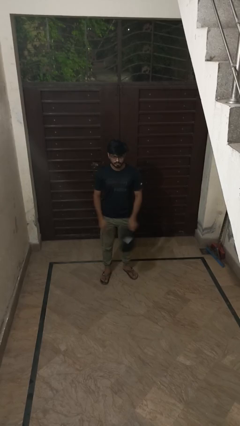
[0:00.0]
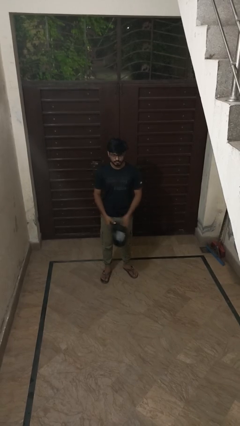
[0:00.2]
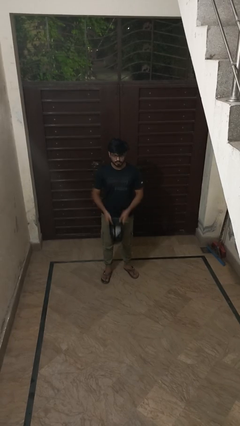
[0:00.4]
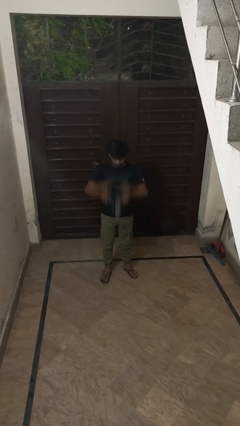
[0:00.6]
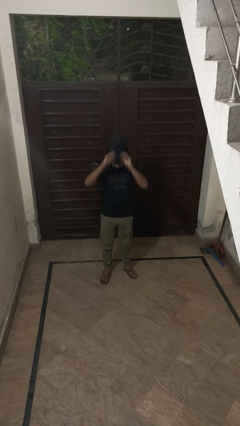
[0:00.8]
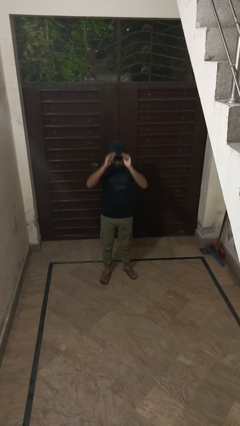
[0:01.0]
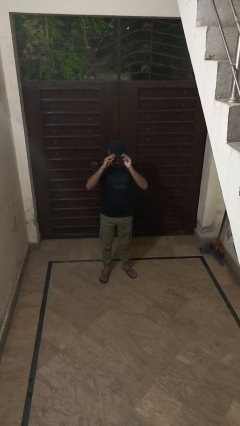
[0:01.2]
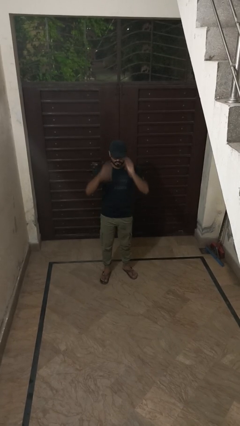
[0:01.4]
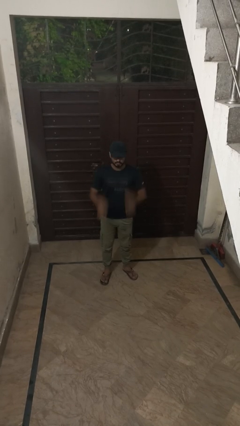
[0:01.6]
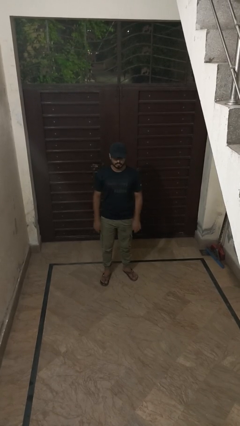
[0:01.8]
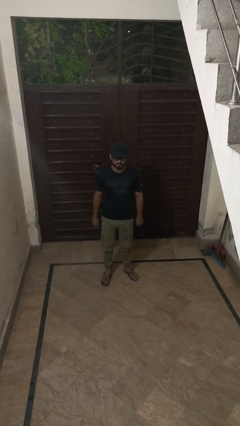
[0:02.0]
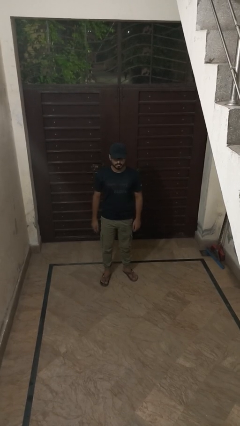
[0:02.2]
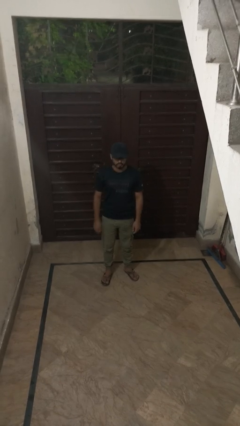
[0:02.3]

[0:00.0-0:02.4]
person puts on hat

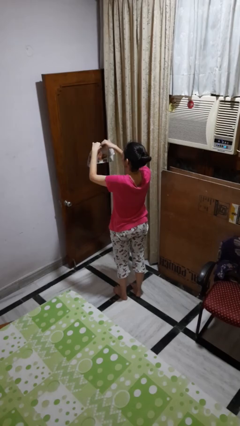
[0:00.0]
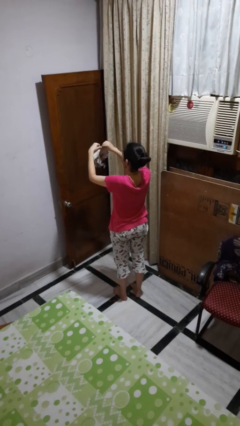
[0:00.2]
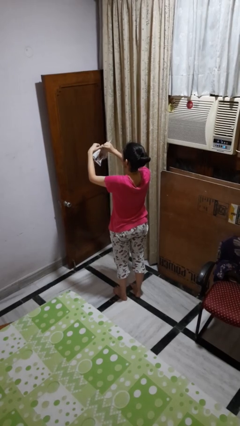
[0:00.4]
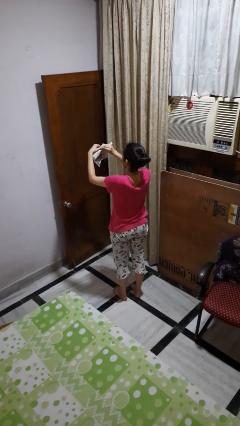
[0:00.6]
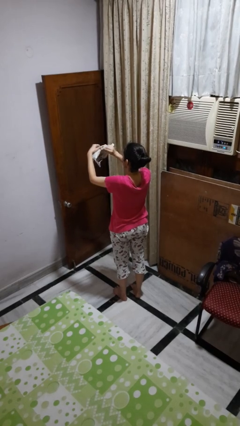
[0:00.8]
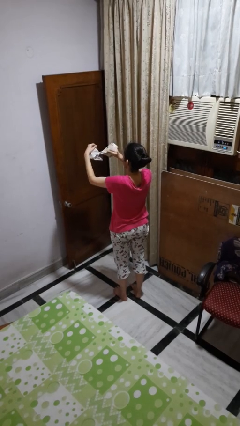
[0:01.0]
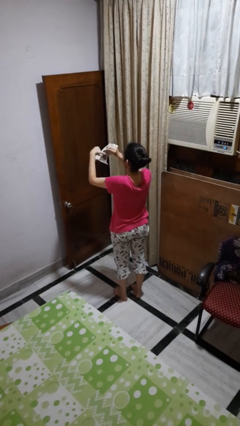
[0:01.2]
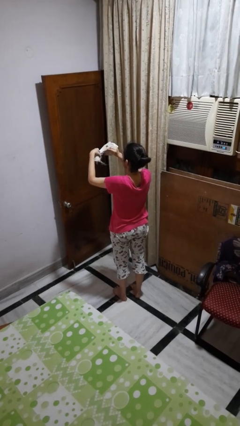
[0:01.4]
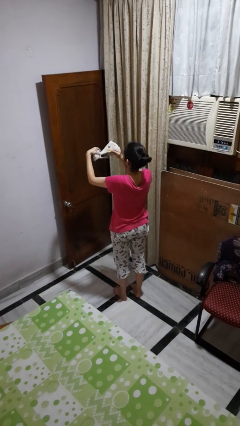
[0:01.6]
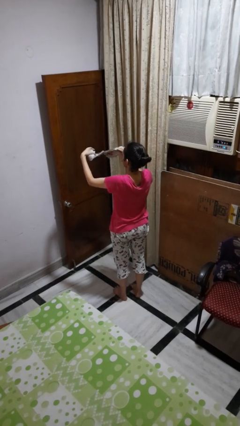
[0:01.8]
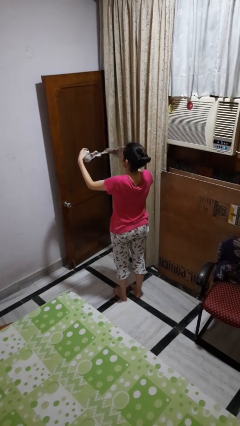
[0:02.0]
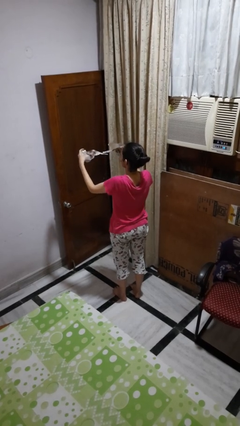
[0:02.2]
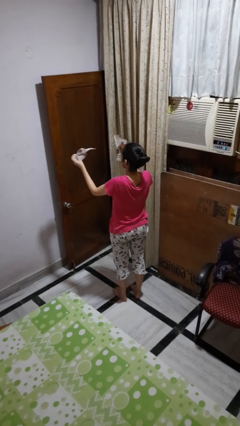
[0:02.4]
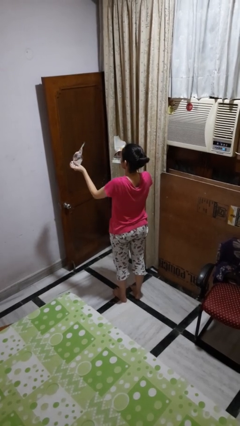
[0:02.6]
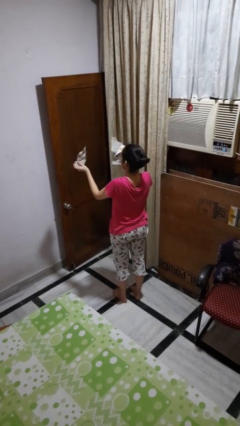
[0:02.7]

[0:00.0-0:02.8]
person tears paper

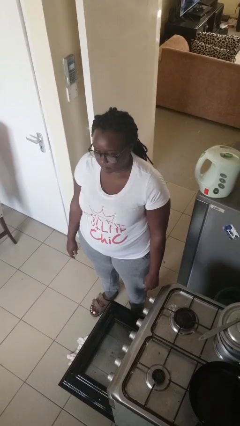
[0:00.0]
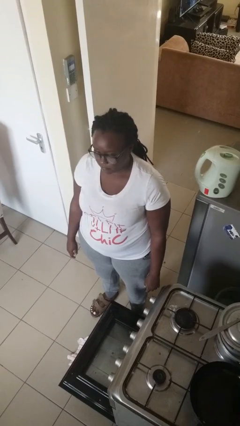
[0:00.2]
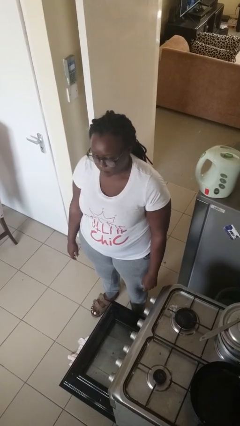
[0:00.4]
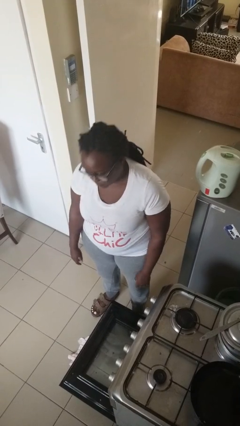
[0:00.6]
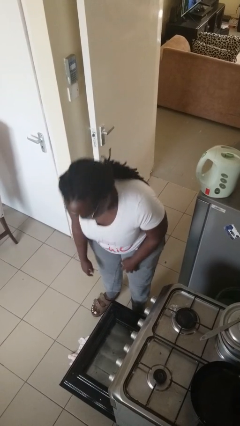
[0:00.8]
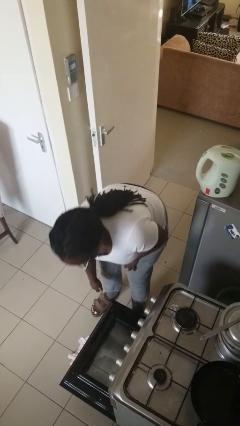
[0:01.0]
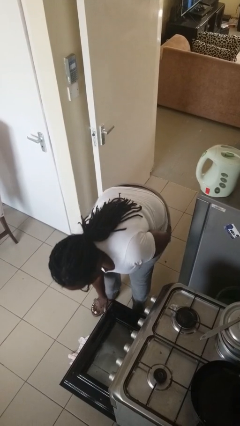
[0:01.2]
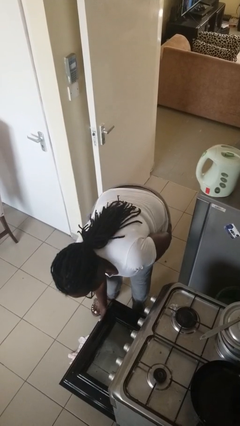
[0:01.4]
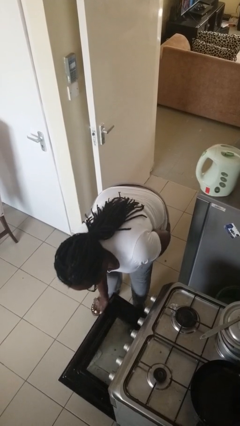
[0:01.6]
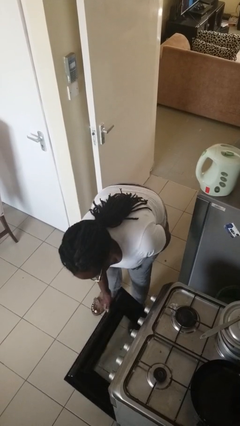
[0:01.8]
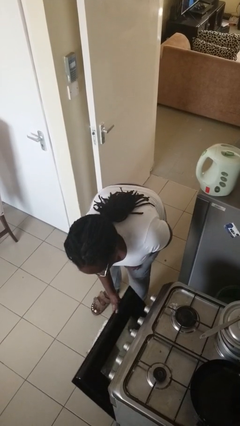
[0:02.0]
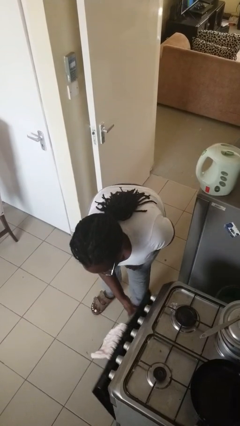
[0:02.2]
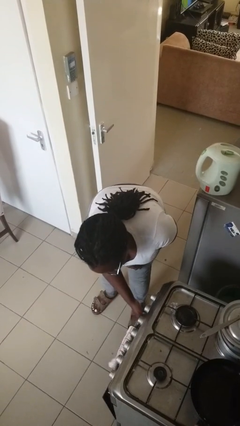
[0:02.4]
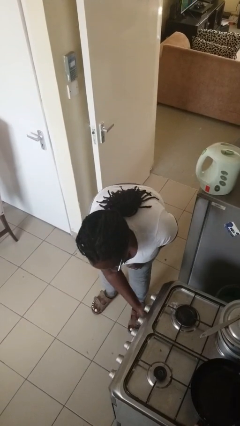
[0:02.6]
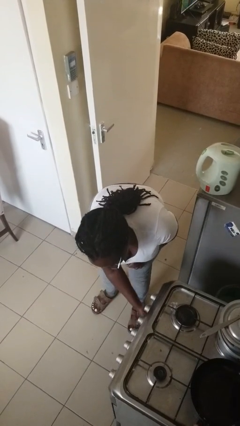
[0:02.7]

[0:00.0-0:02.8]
person closes oven door

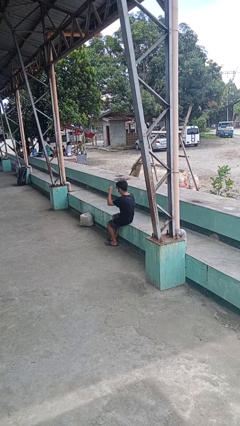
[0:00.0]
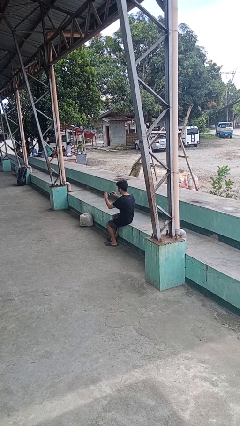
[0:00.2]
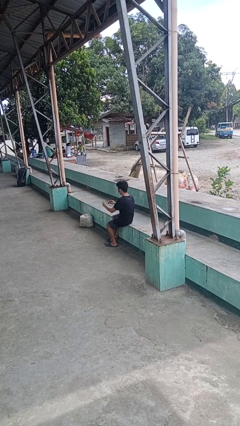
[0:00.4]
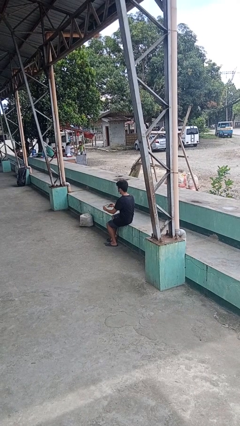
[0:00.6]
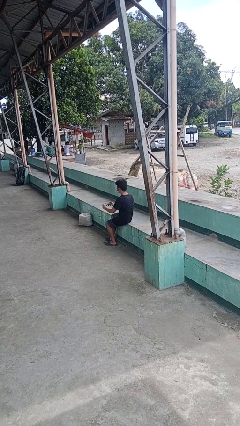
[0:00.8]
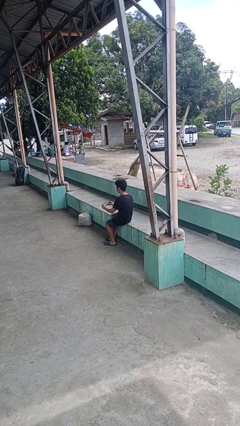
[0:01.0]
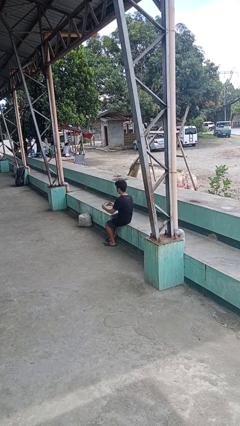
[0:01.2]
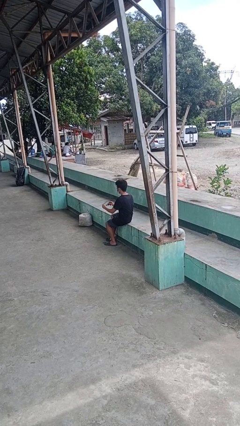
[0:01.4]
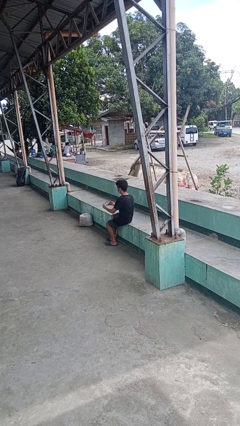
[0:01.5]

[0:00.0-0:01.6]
person takes off sunglasses

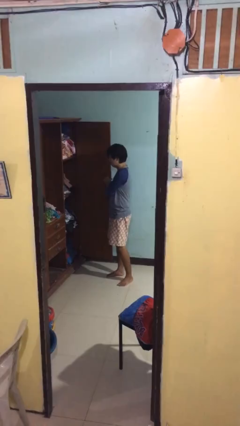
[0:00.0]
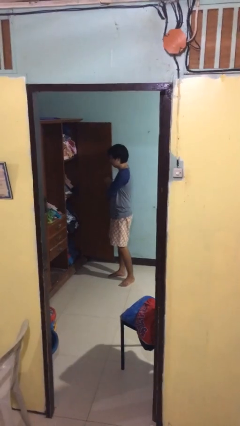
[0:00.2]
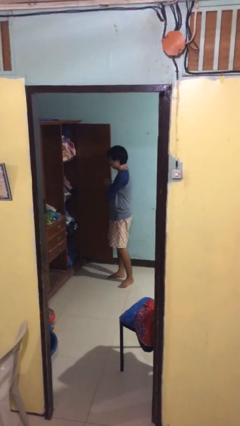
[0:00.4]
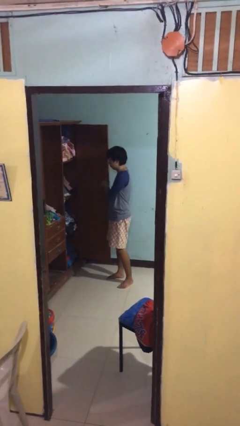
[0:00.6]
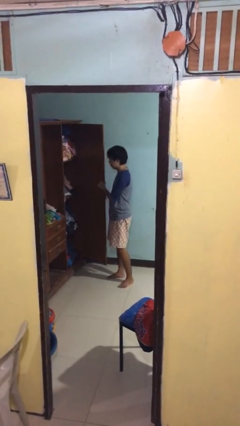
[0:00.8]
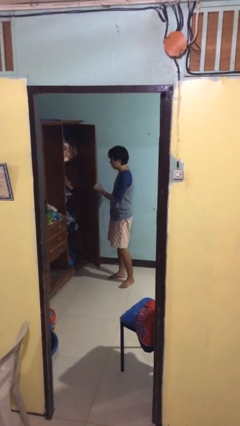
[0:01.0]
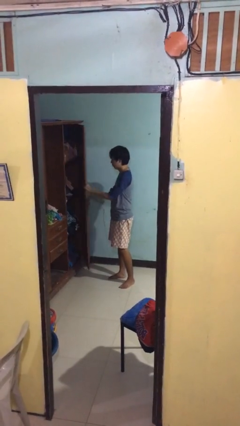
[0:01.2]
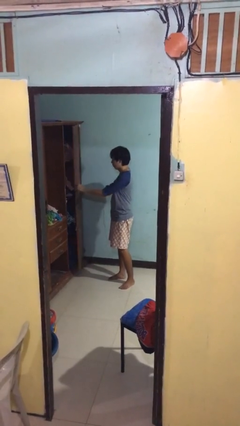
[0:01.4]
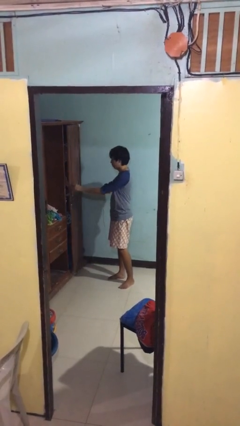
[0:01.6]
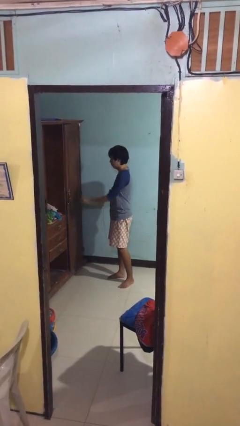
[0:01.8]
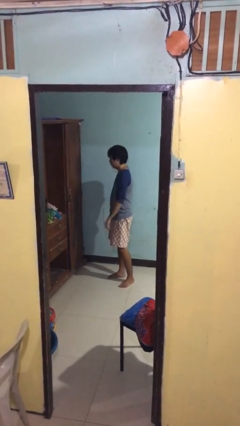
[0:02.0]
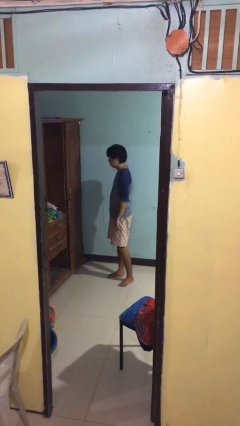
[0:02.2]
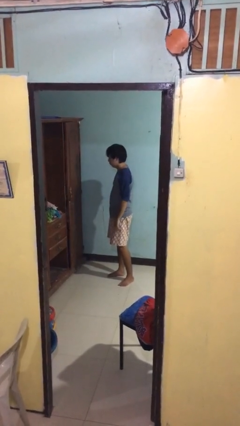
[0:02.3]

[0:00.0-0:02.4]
person closes closet door

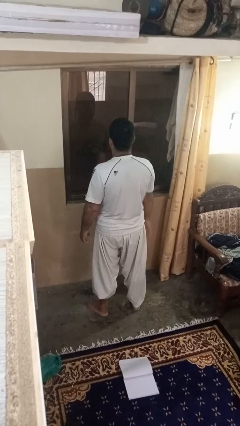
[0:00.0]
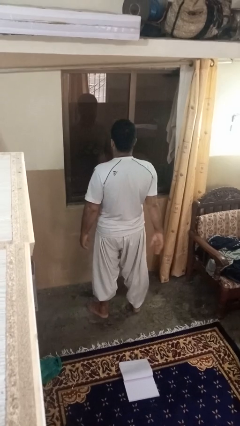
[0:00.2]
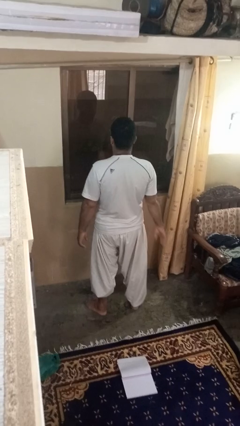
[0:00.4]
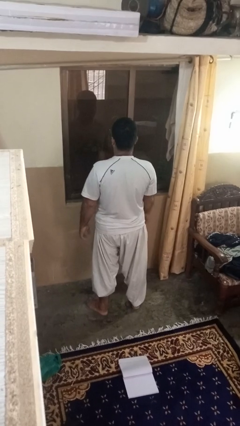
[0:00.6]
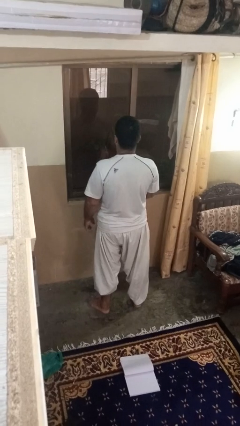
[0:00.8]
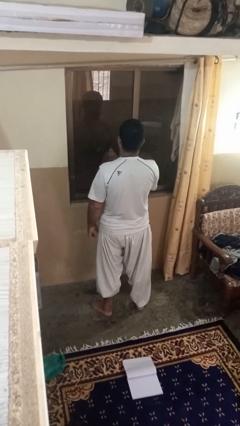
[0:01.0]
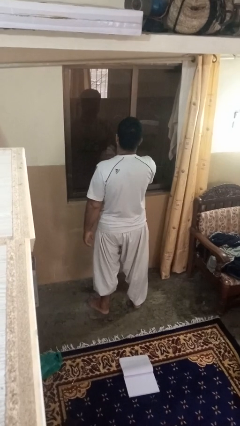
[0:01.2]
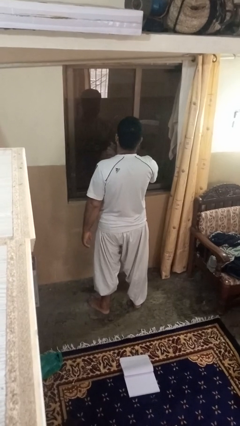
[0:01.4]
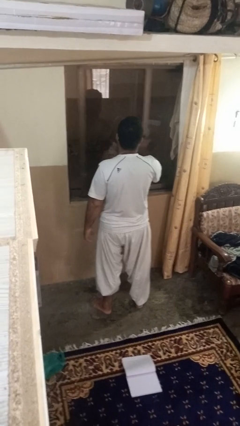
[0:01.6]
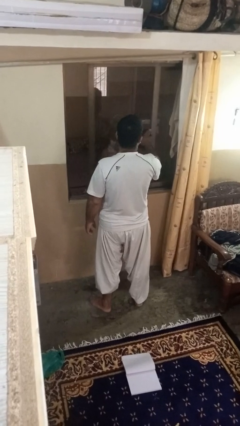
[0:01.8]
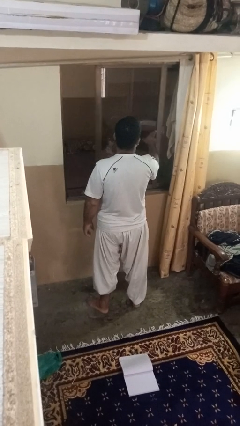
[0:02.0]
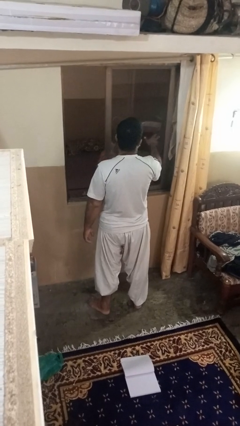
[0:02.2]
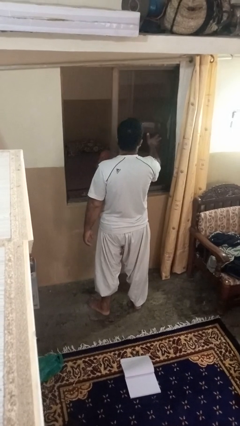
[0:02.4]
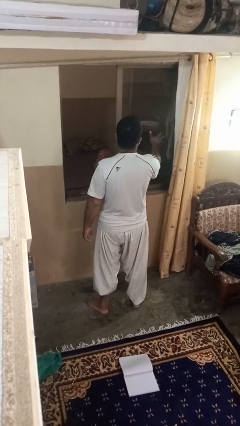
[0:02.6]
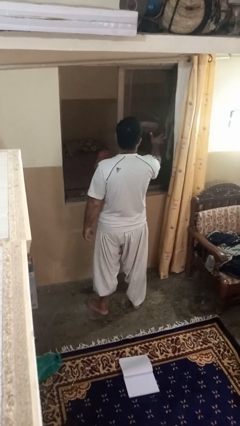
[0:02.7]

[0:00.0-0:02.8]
person opens home window

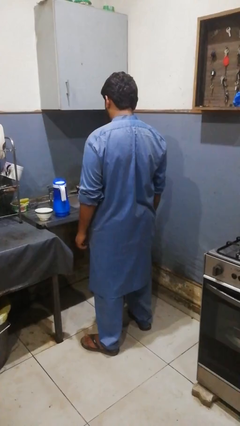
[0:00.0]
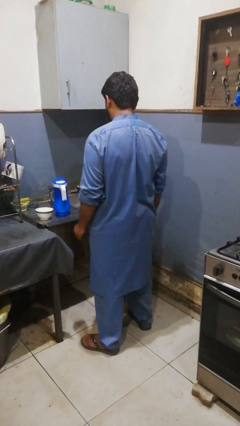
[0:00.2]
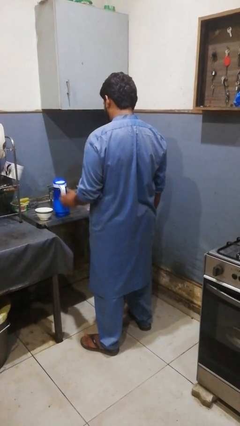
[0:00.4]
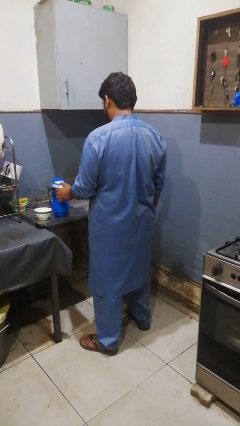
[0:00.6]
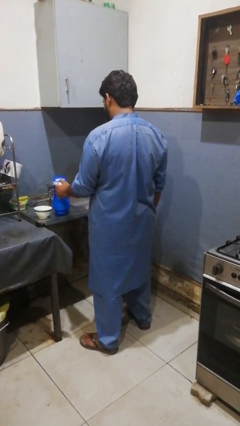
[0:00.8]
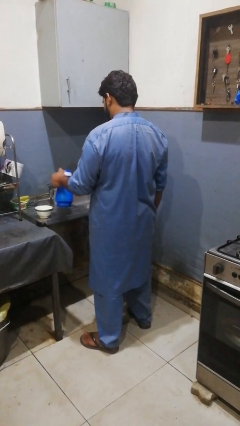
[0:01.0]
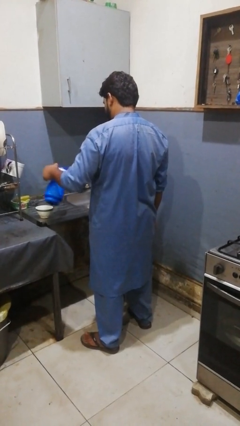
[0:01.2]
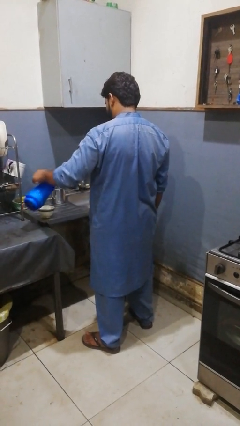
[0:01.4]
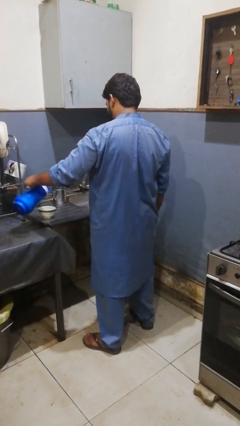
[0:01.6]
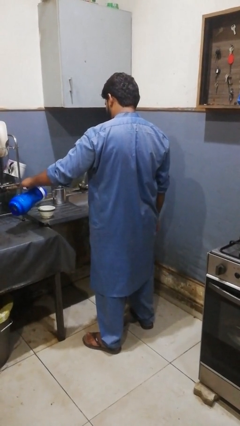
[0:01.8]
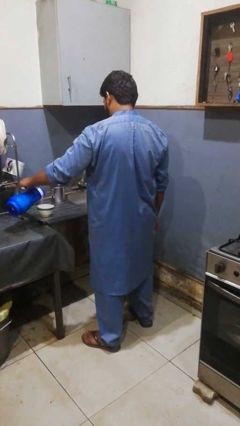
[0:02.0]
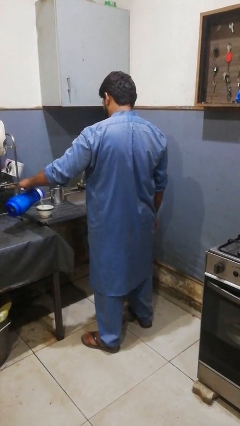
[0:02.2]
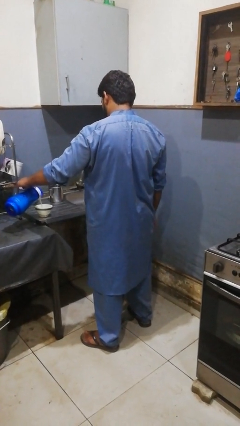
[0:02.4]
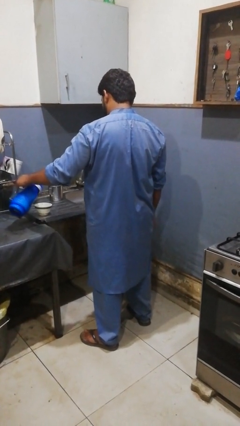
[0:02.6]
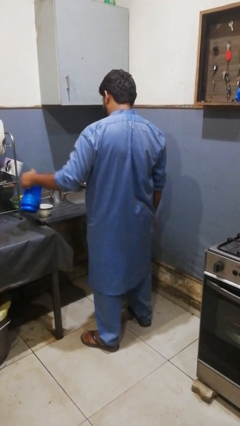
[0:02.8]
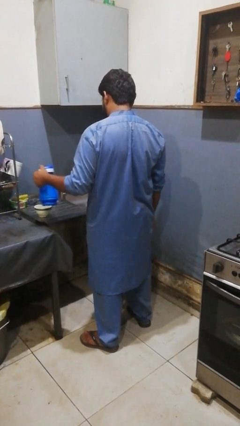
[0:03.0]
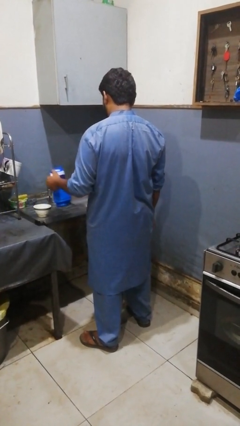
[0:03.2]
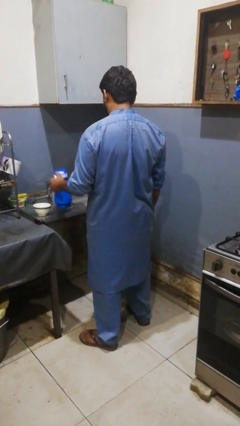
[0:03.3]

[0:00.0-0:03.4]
person pours into bowl
